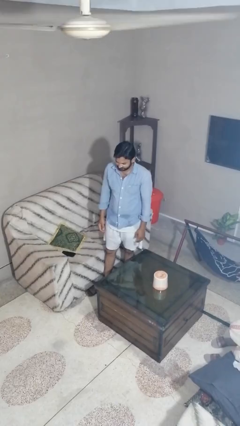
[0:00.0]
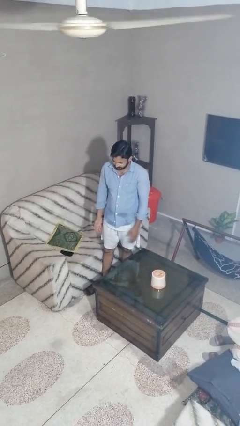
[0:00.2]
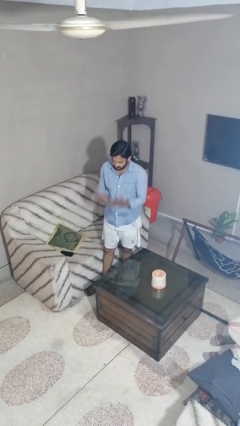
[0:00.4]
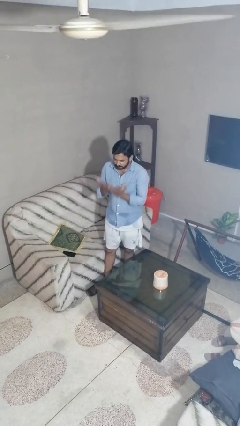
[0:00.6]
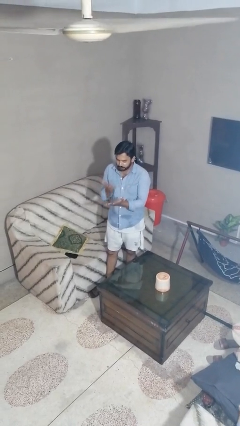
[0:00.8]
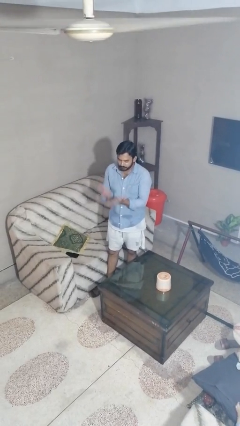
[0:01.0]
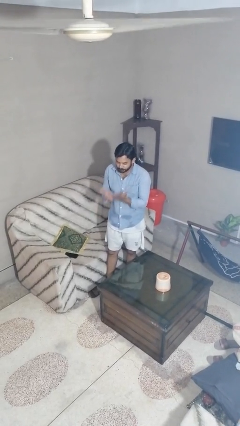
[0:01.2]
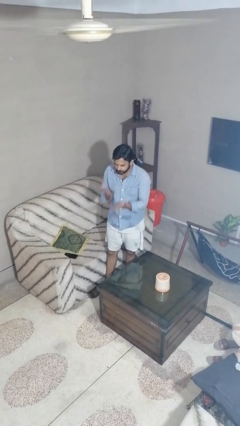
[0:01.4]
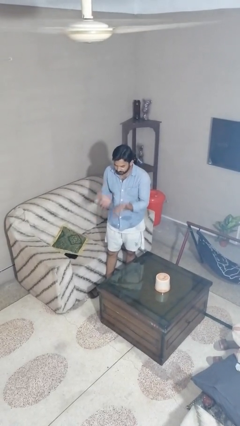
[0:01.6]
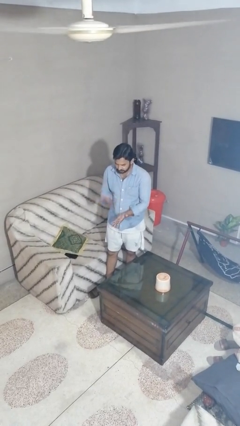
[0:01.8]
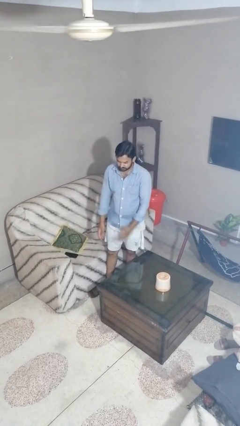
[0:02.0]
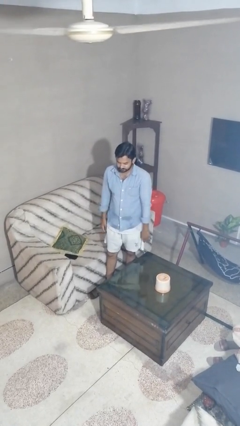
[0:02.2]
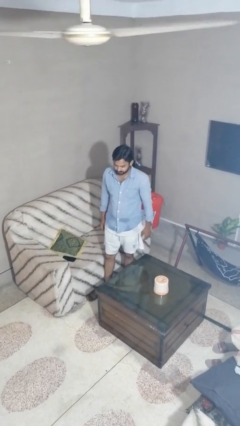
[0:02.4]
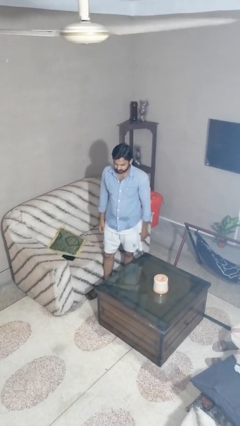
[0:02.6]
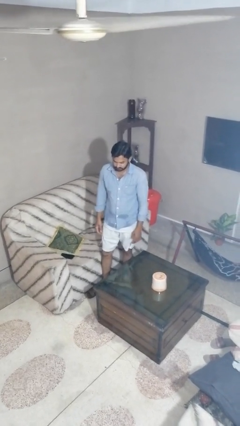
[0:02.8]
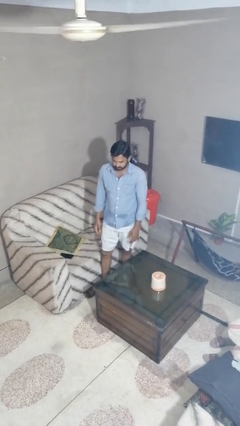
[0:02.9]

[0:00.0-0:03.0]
person blows into hands

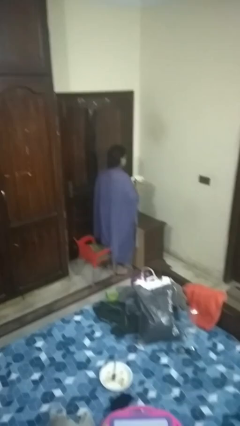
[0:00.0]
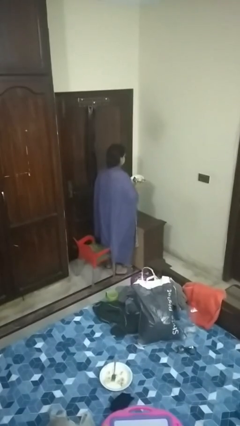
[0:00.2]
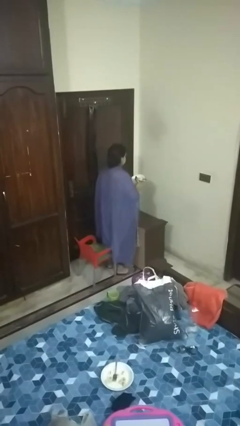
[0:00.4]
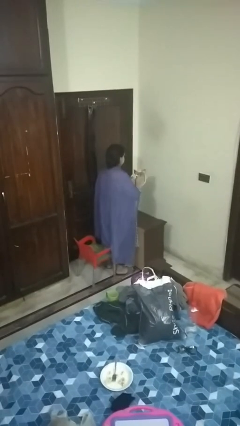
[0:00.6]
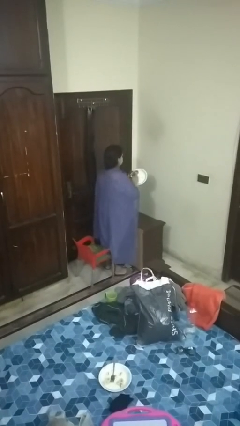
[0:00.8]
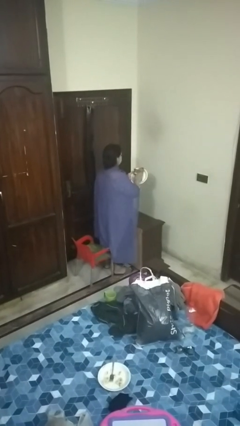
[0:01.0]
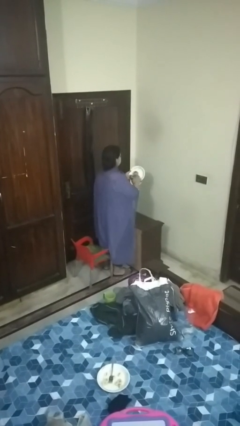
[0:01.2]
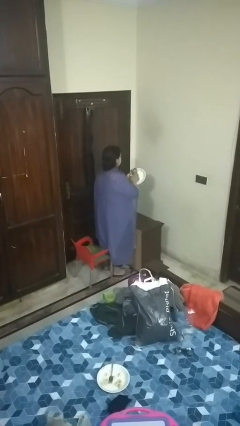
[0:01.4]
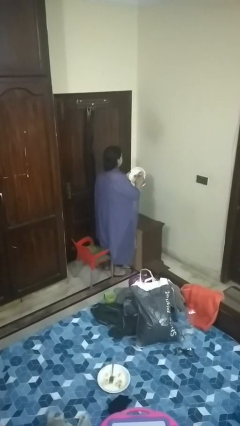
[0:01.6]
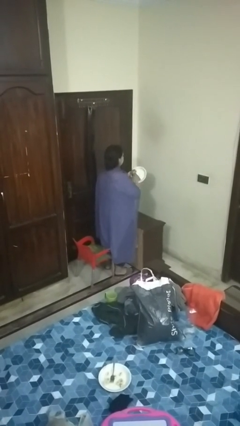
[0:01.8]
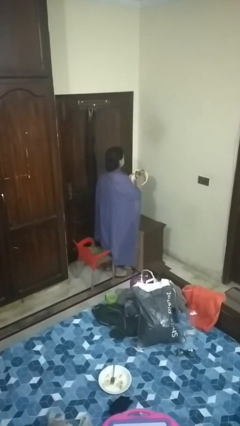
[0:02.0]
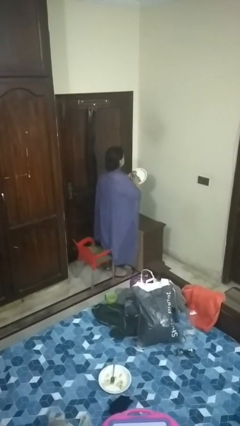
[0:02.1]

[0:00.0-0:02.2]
person dries dish

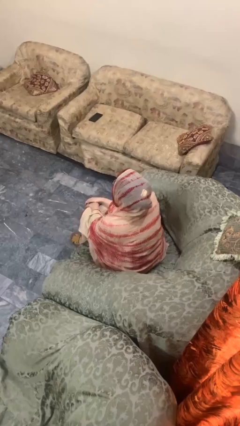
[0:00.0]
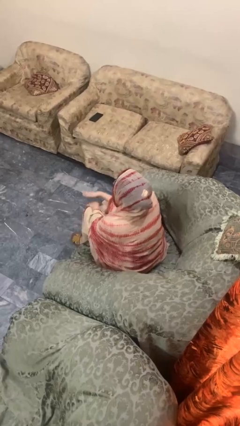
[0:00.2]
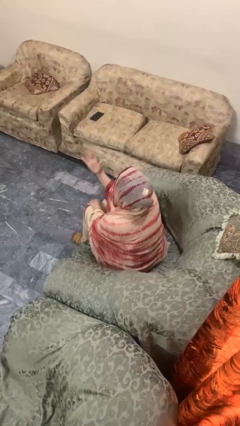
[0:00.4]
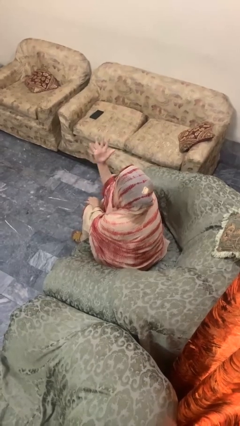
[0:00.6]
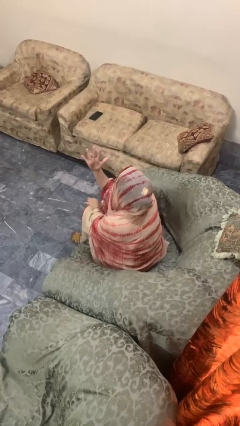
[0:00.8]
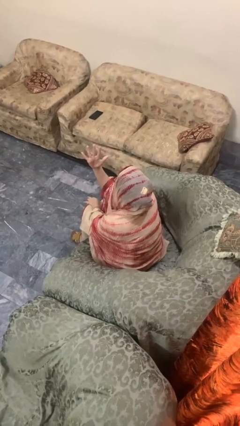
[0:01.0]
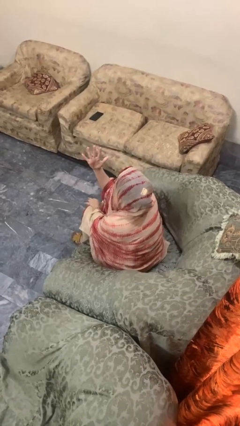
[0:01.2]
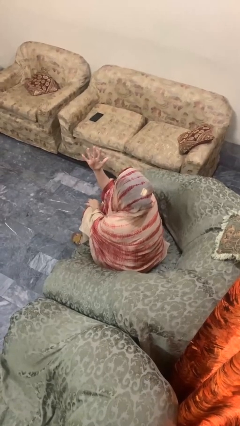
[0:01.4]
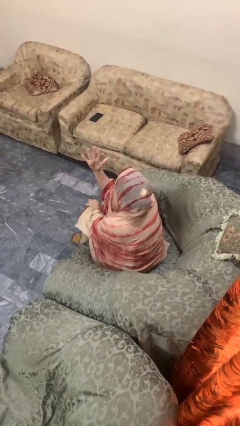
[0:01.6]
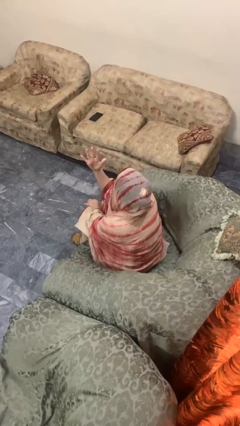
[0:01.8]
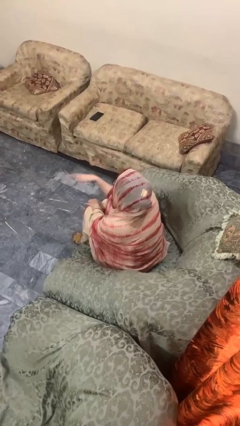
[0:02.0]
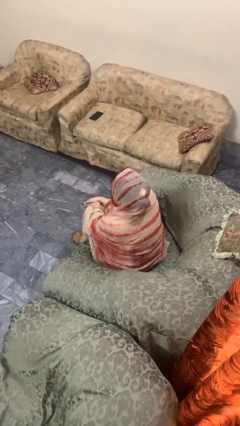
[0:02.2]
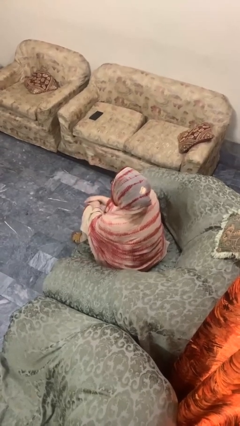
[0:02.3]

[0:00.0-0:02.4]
person gestures number five

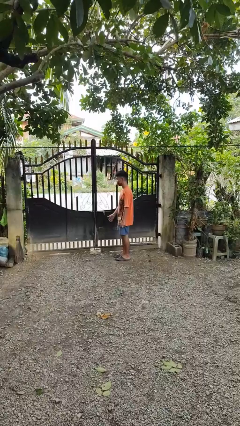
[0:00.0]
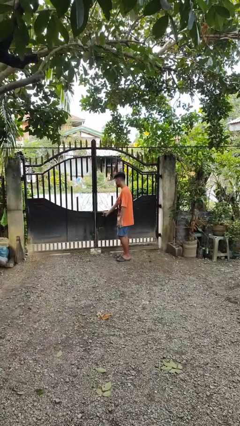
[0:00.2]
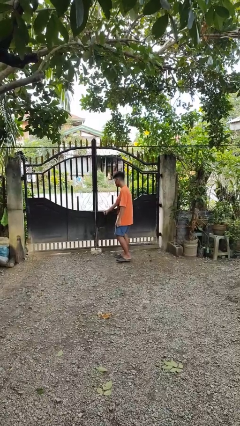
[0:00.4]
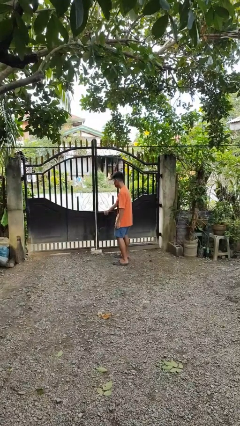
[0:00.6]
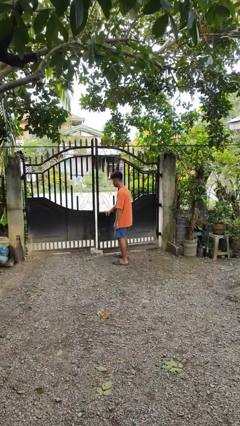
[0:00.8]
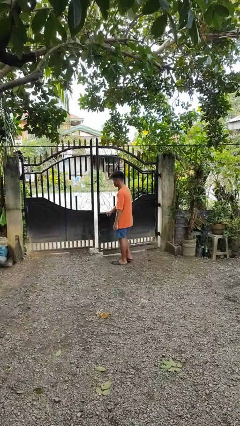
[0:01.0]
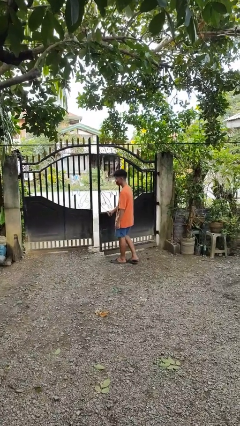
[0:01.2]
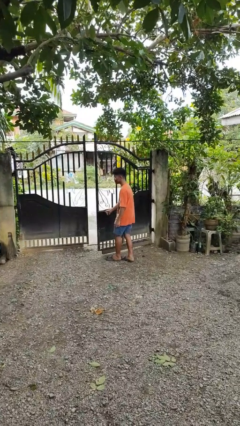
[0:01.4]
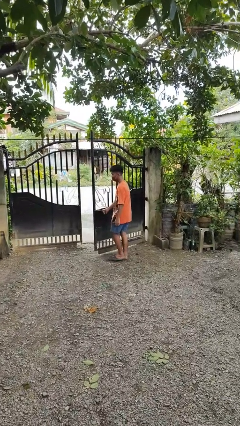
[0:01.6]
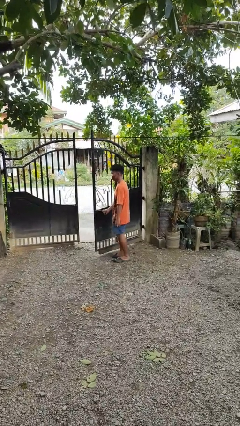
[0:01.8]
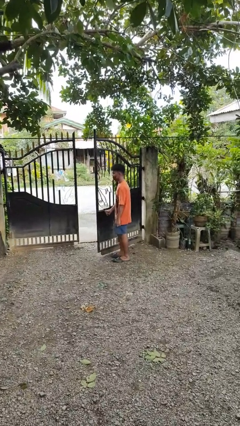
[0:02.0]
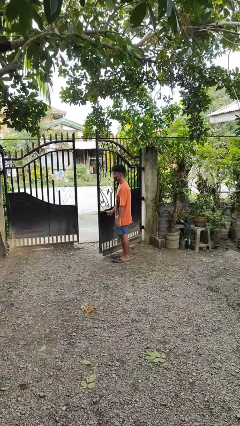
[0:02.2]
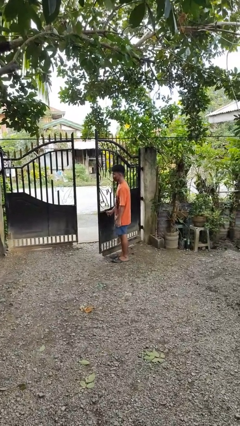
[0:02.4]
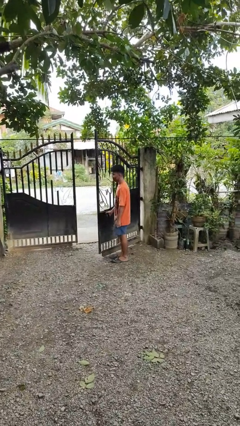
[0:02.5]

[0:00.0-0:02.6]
person opens gate

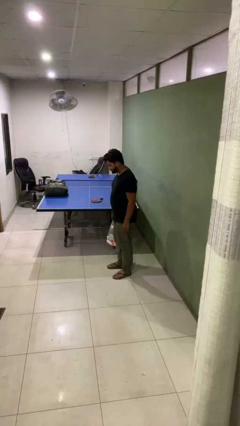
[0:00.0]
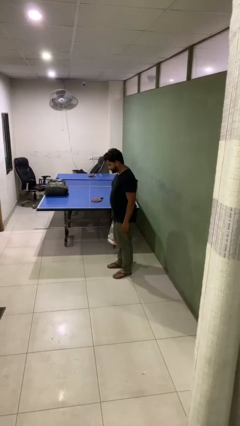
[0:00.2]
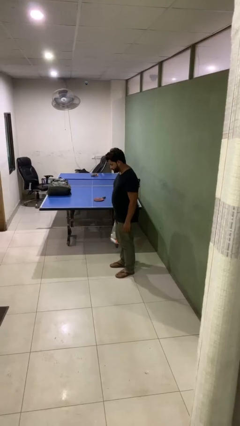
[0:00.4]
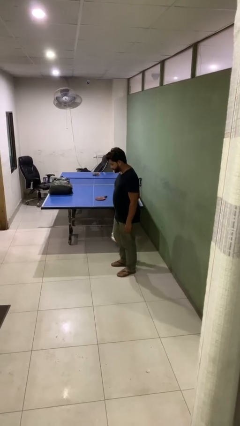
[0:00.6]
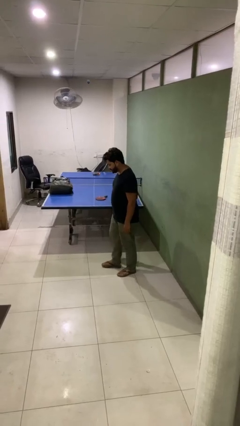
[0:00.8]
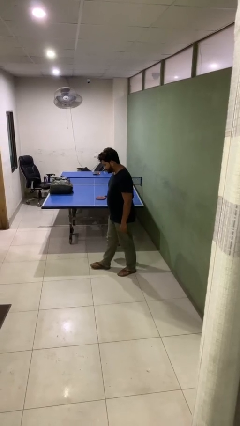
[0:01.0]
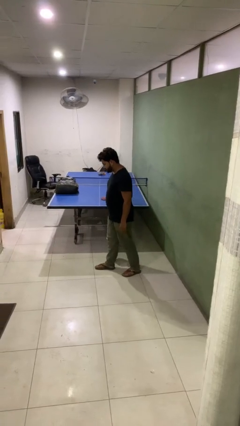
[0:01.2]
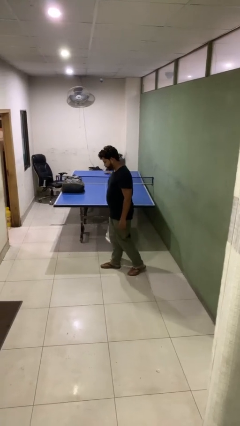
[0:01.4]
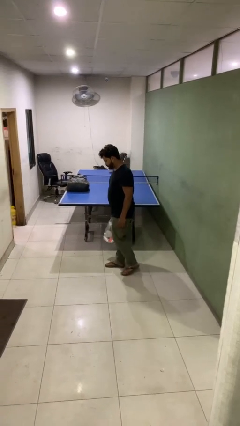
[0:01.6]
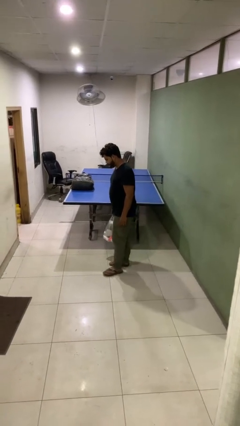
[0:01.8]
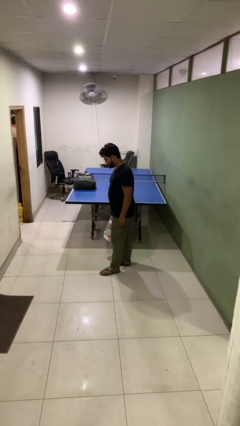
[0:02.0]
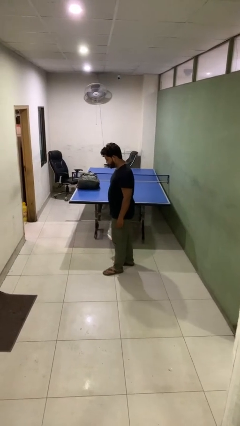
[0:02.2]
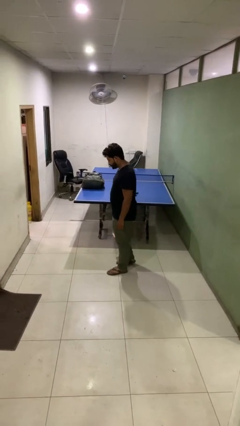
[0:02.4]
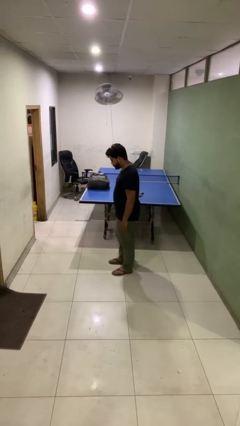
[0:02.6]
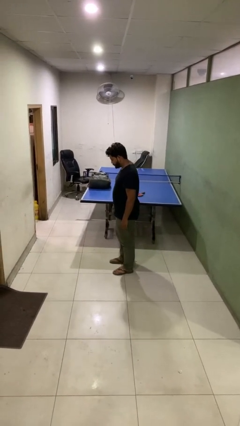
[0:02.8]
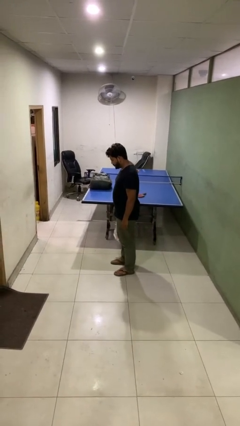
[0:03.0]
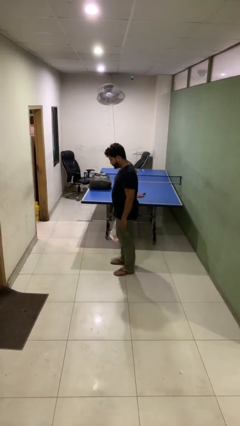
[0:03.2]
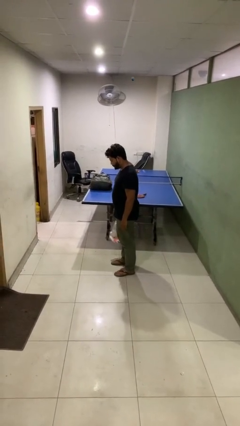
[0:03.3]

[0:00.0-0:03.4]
person carries groceries

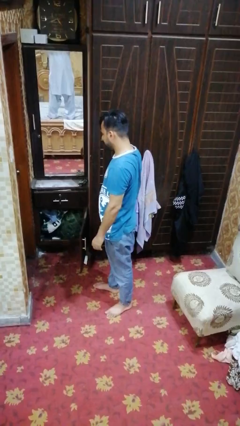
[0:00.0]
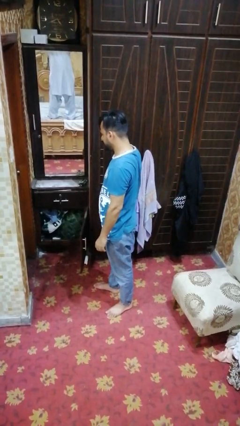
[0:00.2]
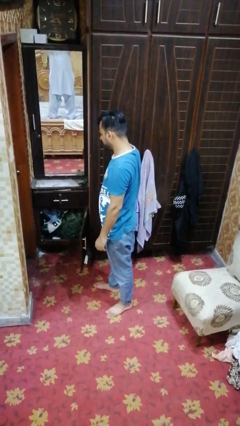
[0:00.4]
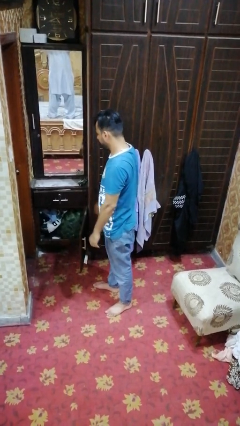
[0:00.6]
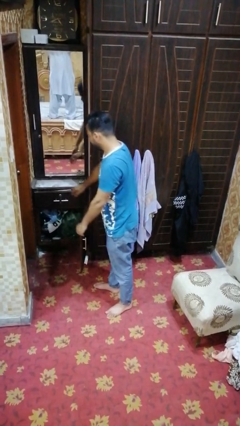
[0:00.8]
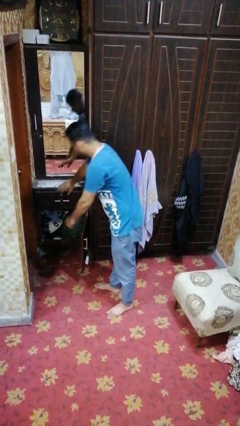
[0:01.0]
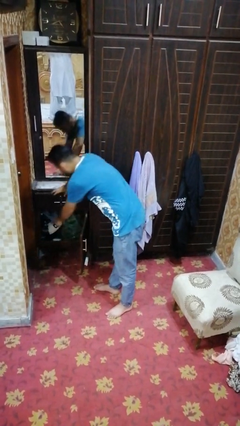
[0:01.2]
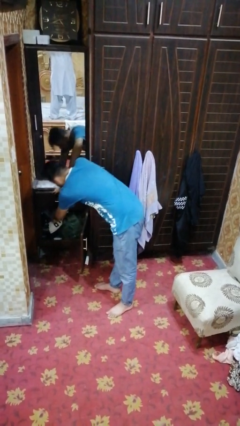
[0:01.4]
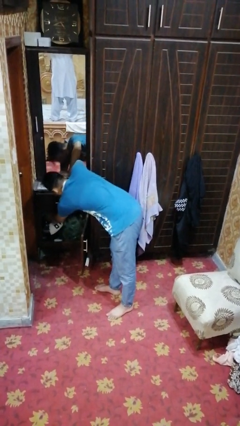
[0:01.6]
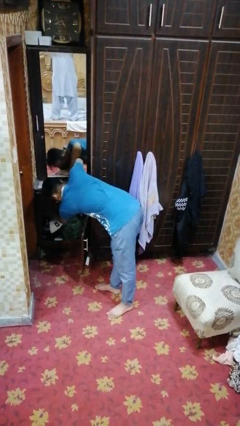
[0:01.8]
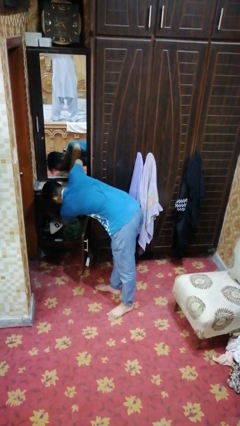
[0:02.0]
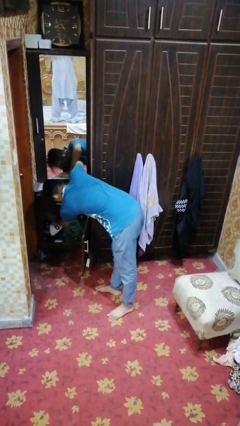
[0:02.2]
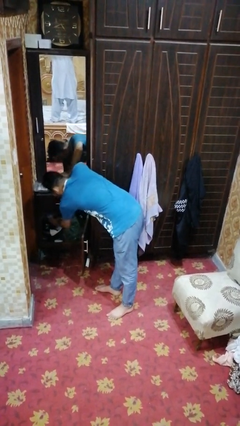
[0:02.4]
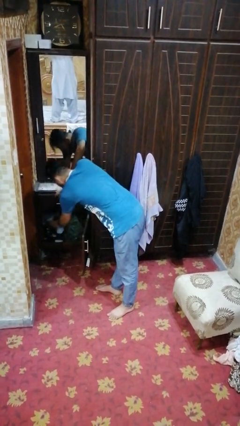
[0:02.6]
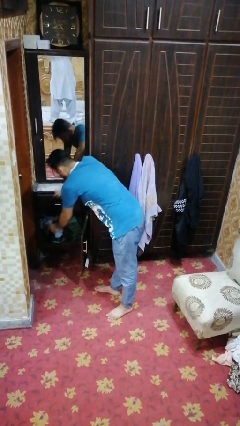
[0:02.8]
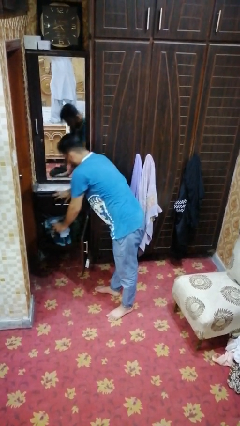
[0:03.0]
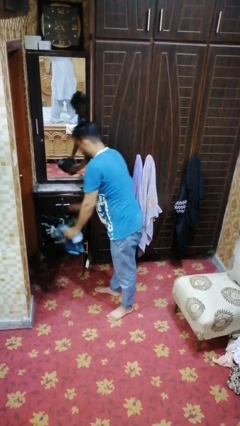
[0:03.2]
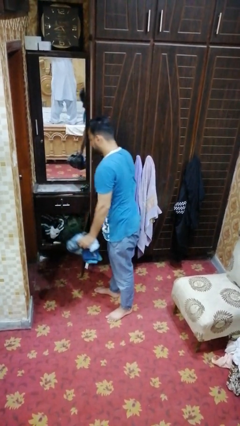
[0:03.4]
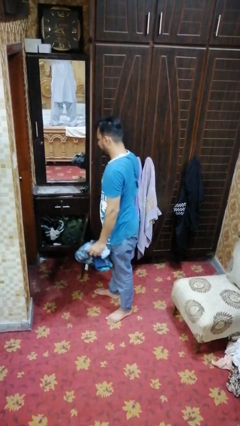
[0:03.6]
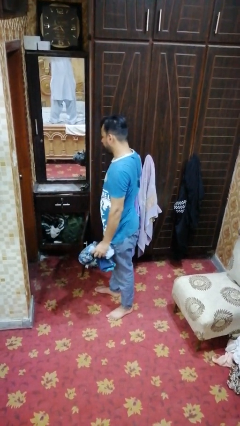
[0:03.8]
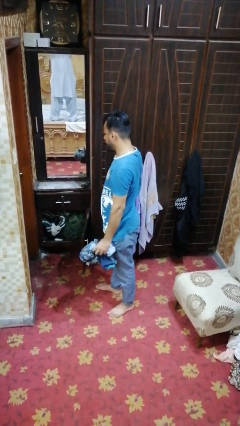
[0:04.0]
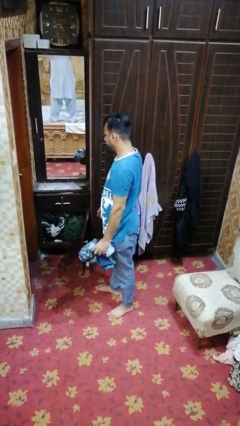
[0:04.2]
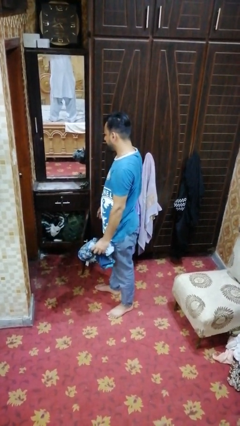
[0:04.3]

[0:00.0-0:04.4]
person takes clothes from dresser
